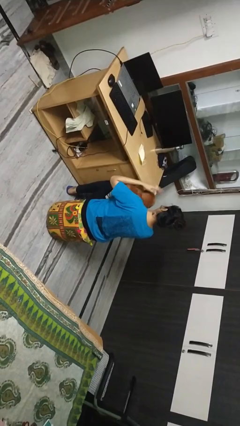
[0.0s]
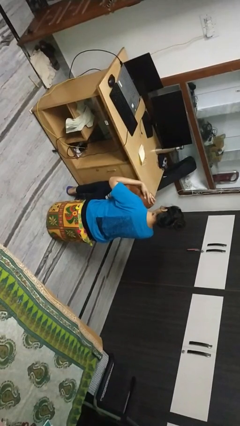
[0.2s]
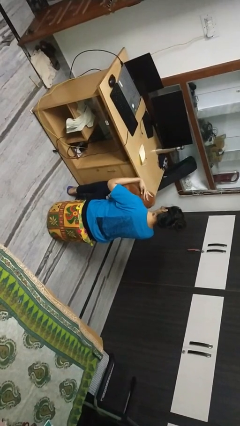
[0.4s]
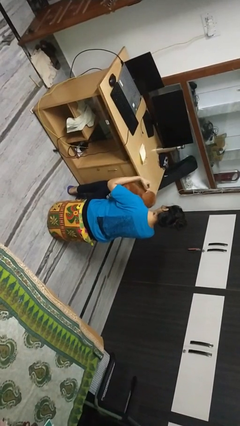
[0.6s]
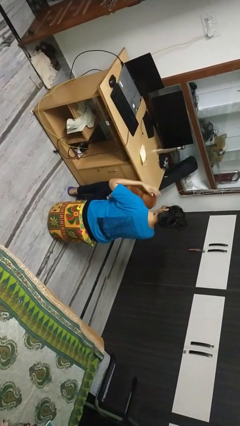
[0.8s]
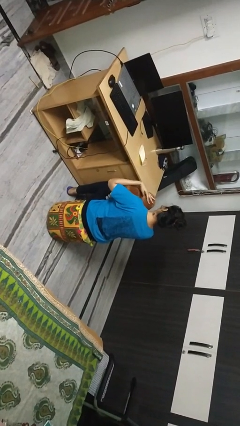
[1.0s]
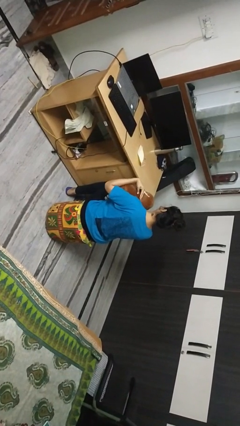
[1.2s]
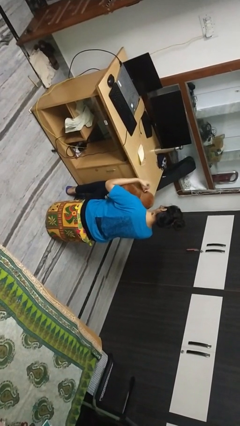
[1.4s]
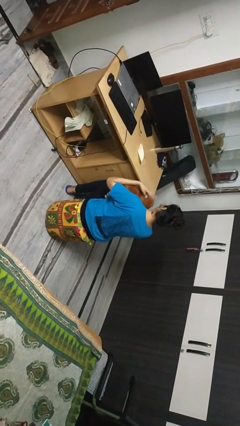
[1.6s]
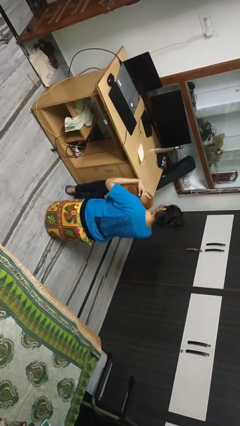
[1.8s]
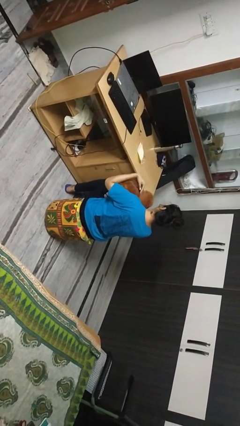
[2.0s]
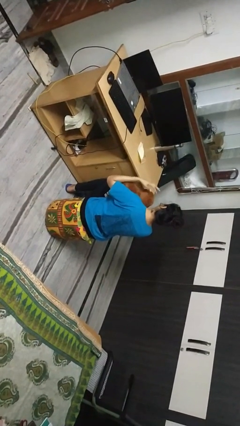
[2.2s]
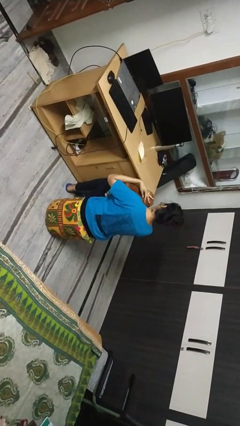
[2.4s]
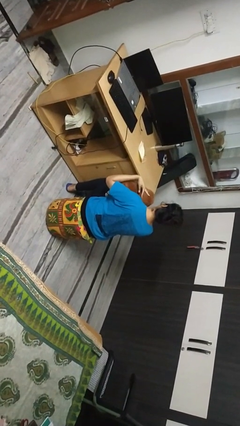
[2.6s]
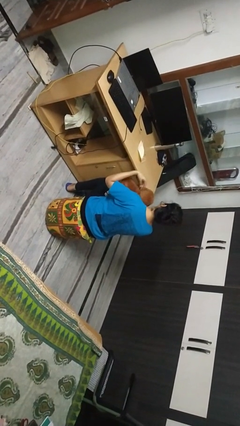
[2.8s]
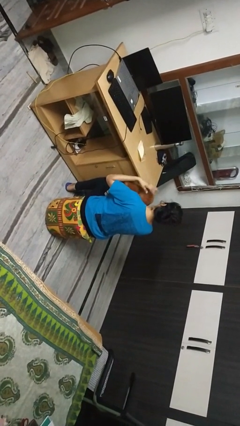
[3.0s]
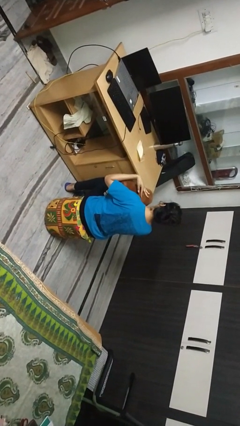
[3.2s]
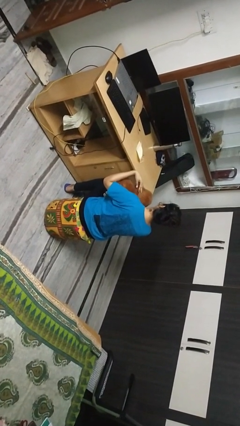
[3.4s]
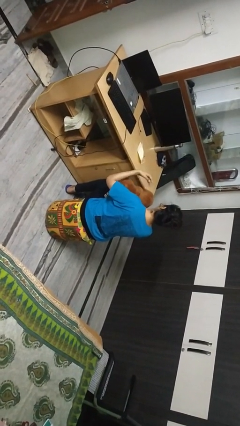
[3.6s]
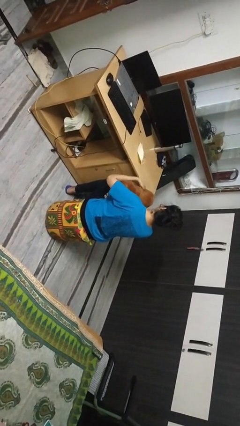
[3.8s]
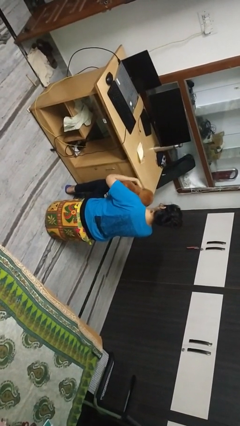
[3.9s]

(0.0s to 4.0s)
person pets dog

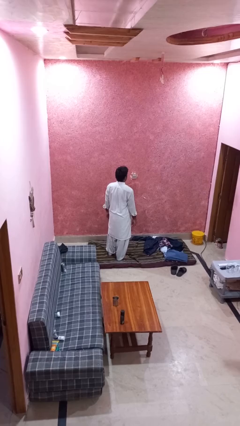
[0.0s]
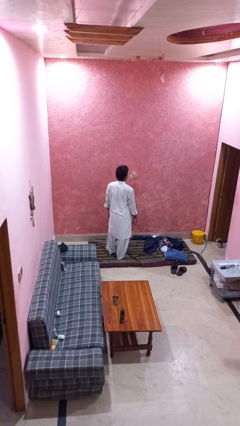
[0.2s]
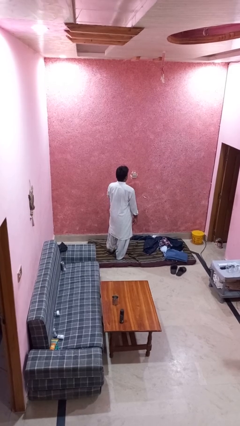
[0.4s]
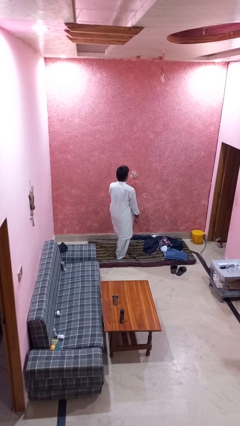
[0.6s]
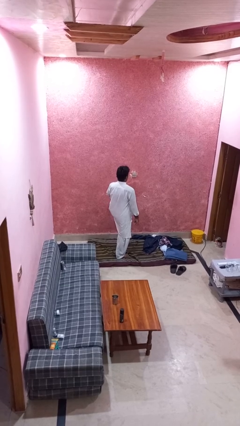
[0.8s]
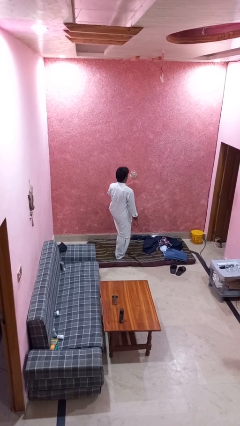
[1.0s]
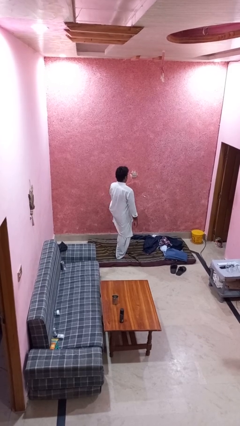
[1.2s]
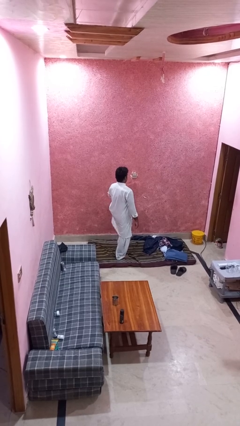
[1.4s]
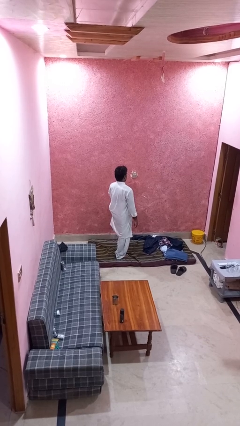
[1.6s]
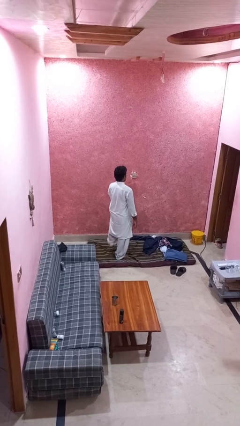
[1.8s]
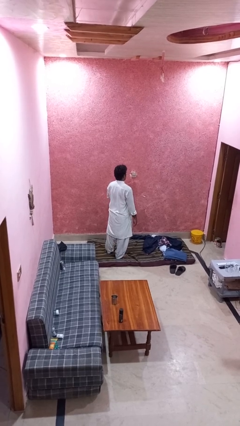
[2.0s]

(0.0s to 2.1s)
person slaps hands on thighs

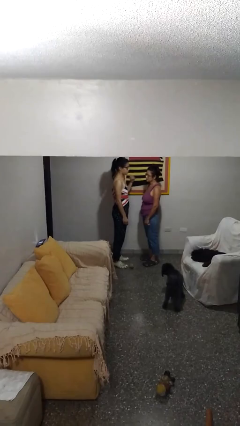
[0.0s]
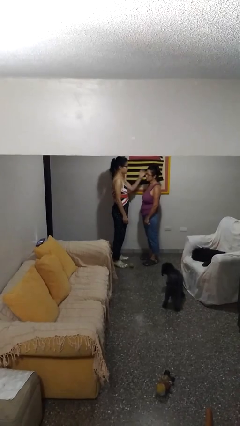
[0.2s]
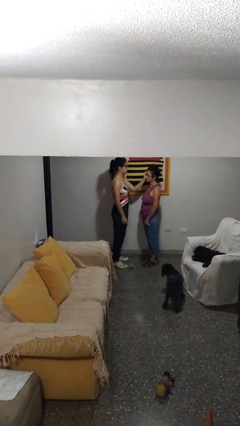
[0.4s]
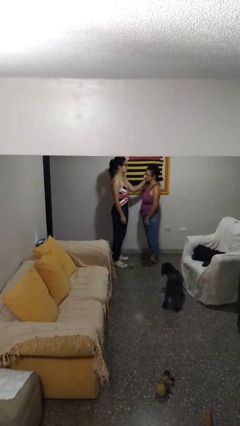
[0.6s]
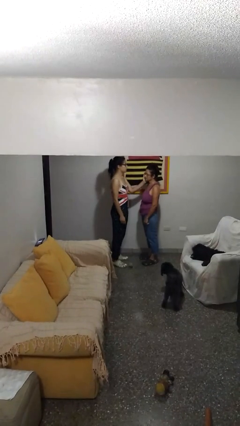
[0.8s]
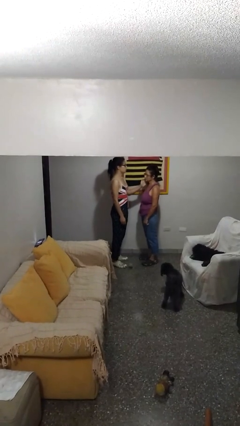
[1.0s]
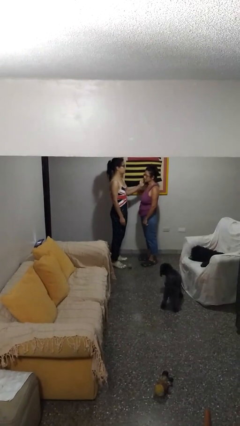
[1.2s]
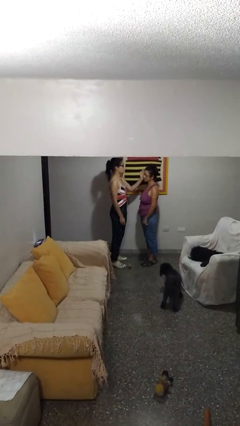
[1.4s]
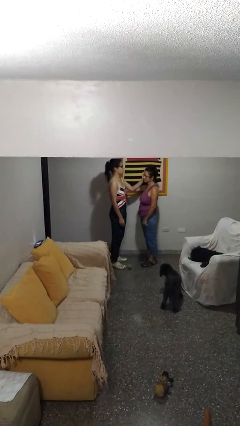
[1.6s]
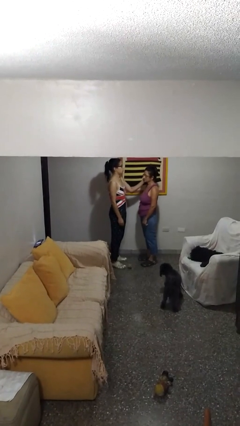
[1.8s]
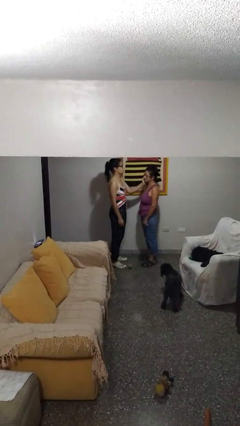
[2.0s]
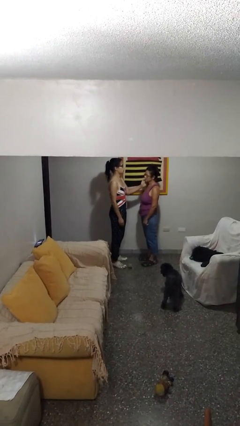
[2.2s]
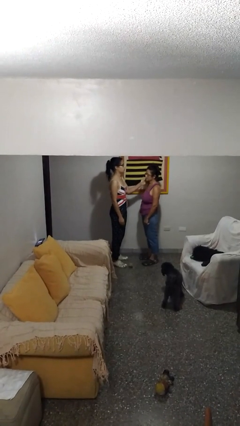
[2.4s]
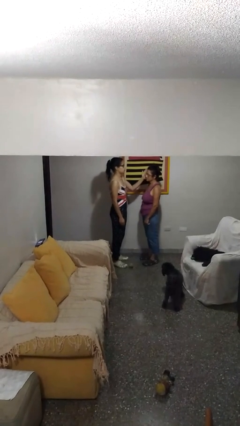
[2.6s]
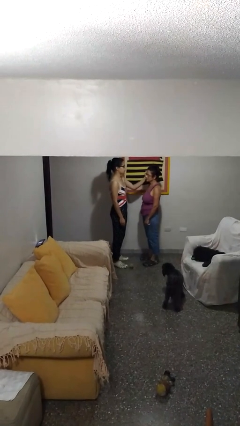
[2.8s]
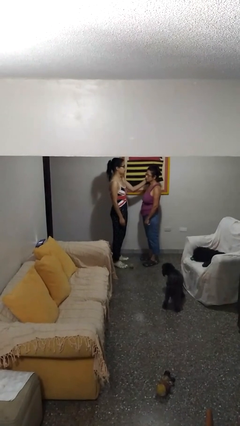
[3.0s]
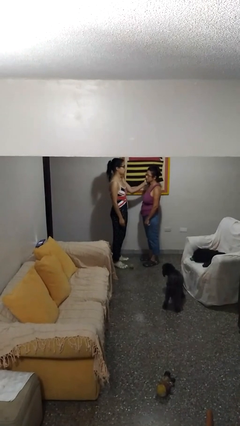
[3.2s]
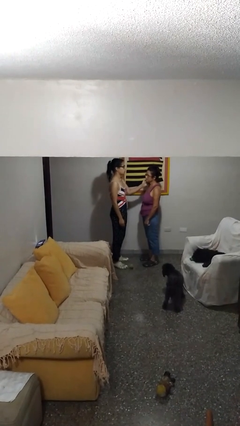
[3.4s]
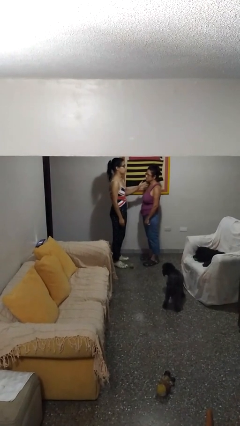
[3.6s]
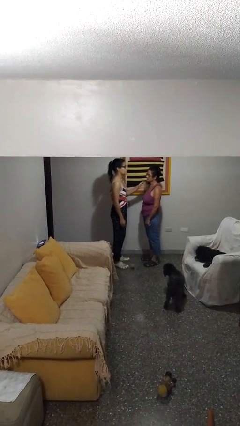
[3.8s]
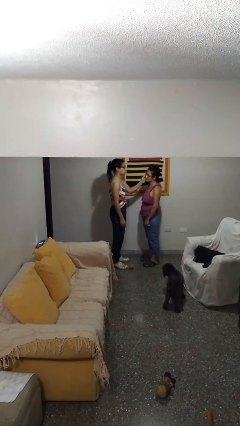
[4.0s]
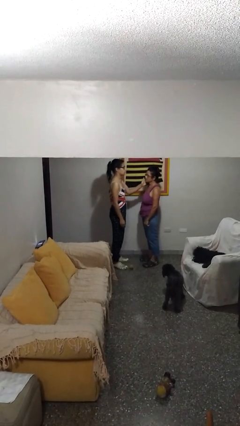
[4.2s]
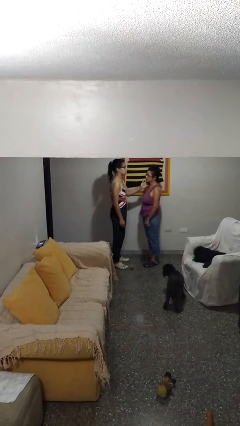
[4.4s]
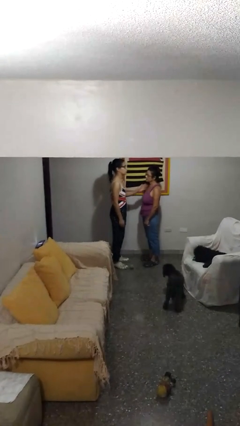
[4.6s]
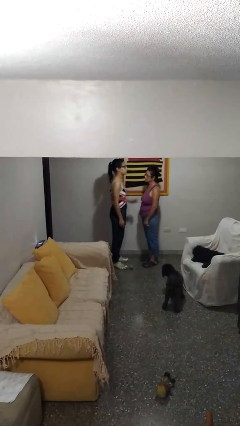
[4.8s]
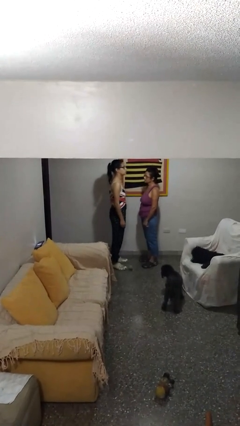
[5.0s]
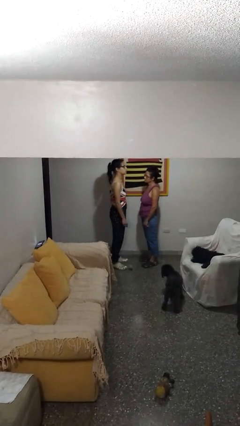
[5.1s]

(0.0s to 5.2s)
person touches face of person

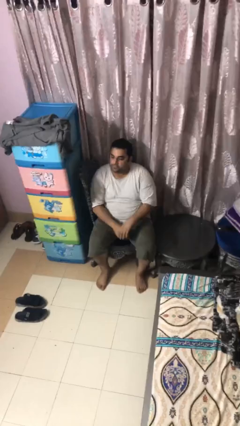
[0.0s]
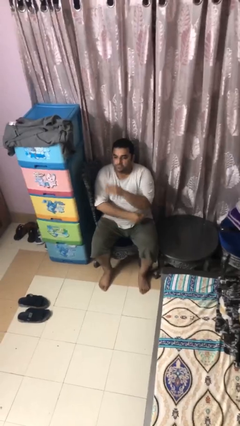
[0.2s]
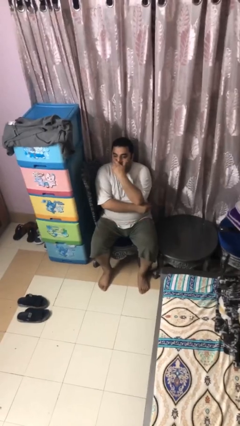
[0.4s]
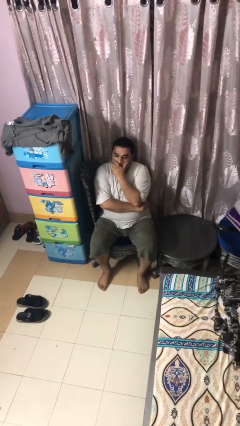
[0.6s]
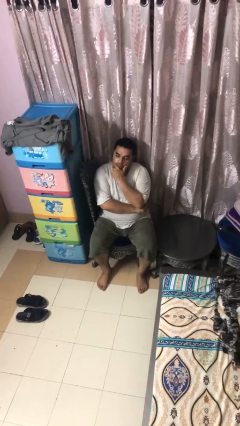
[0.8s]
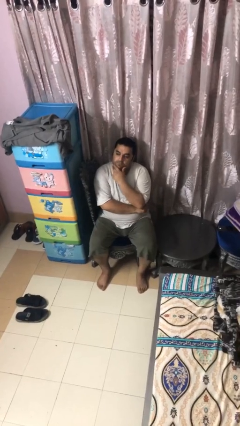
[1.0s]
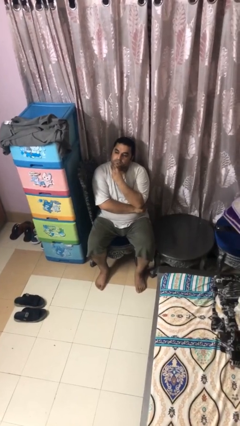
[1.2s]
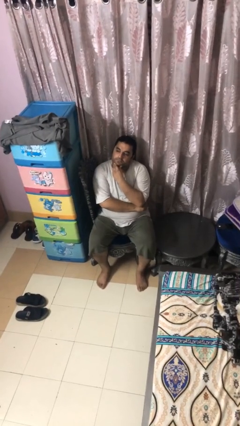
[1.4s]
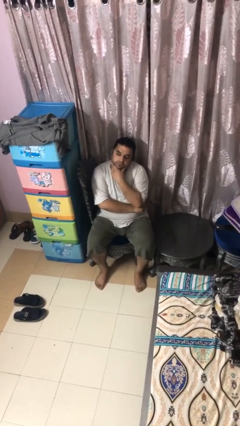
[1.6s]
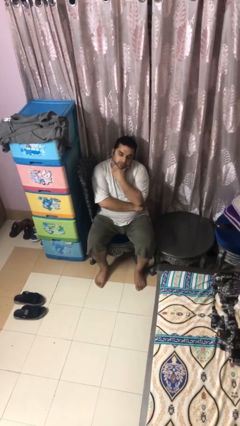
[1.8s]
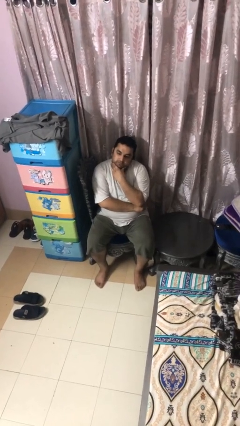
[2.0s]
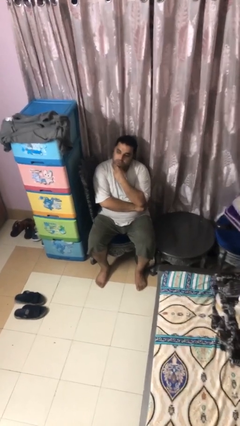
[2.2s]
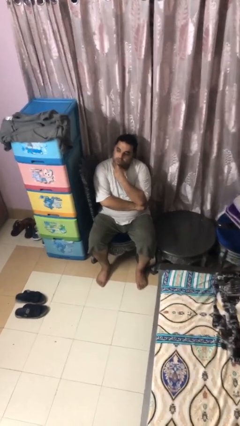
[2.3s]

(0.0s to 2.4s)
person strokes chin

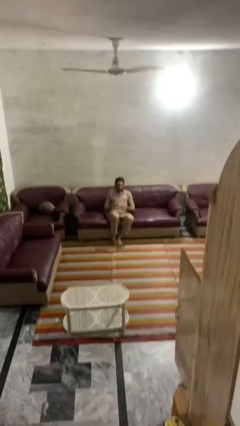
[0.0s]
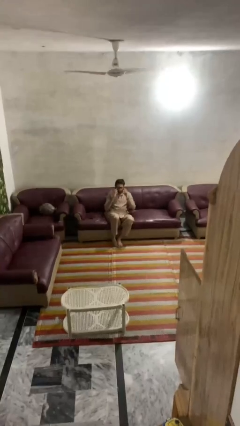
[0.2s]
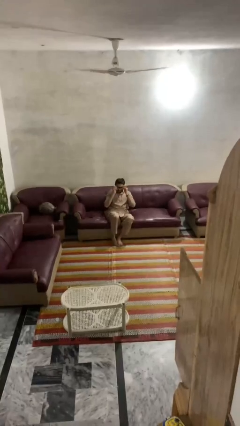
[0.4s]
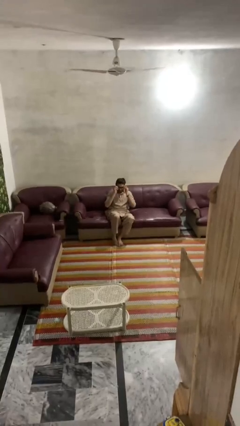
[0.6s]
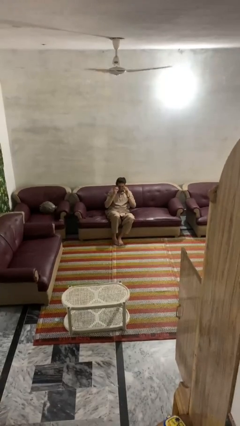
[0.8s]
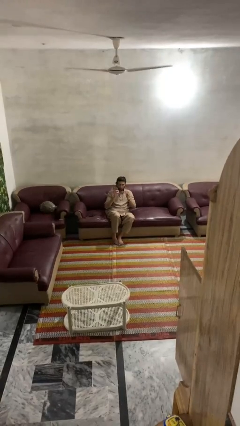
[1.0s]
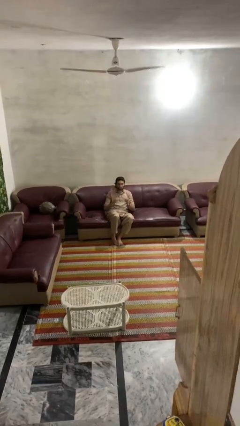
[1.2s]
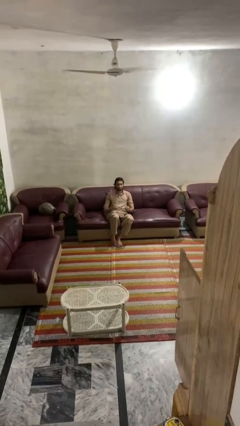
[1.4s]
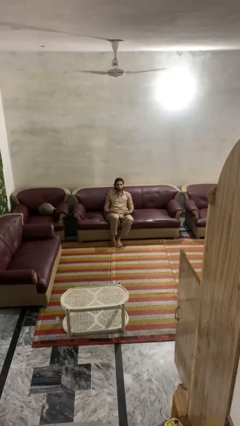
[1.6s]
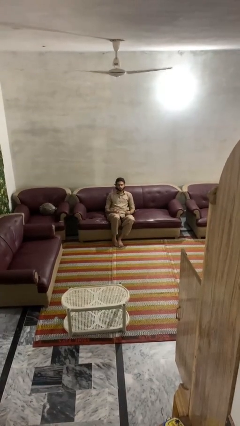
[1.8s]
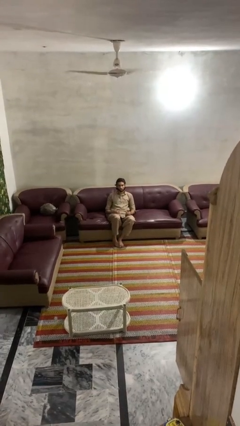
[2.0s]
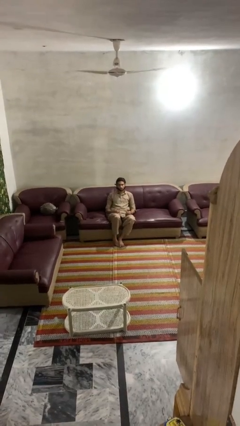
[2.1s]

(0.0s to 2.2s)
person takes off glasses

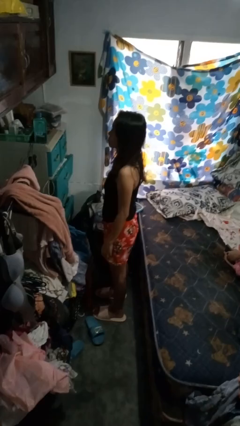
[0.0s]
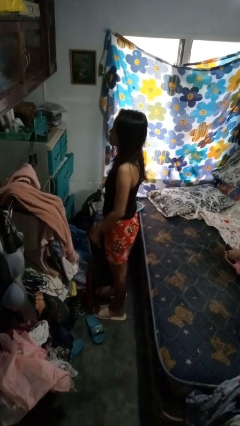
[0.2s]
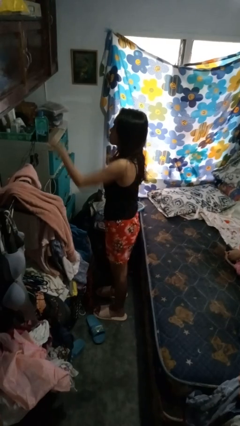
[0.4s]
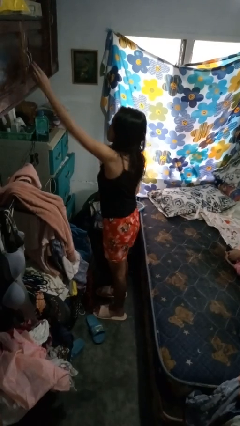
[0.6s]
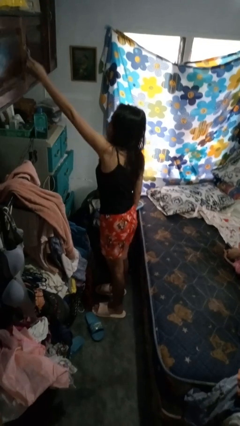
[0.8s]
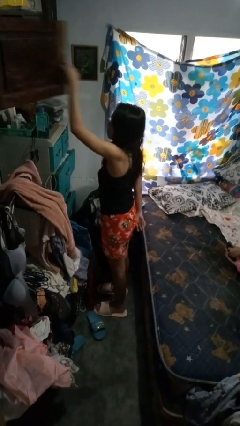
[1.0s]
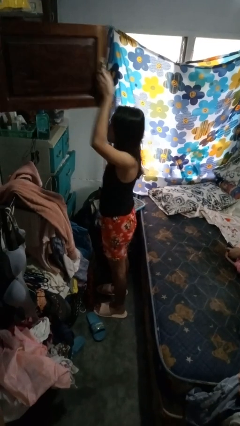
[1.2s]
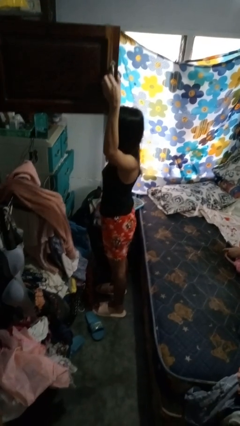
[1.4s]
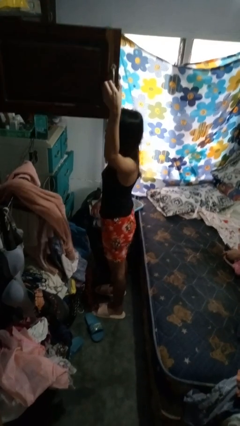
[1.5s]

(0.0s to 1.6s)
person opens closet door

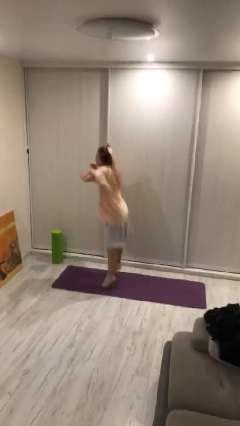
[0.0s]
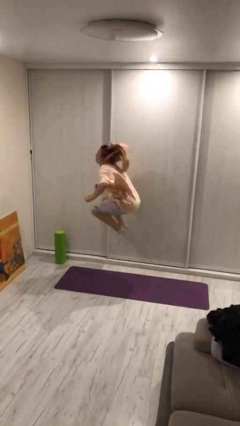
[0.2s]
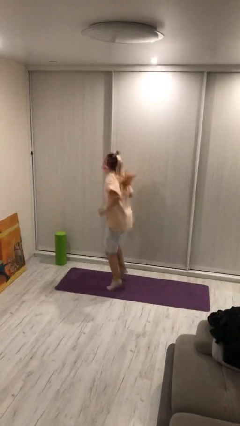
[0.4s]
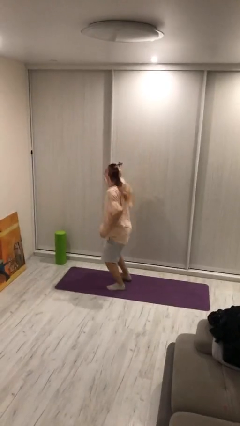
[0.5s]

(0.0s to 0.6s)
person jumps
